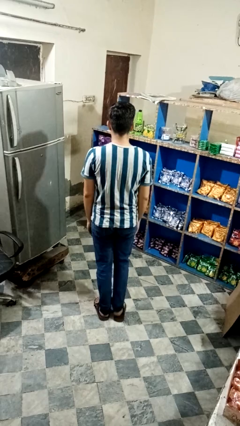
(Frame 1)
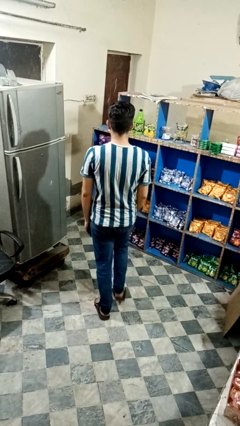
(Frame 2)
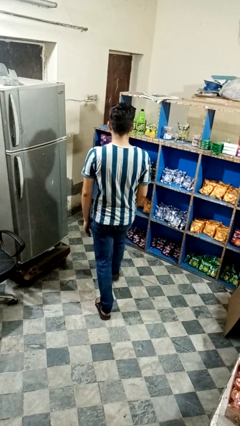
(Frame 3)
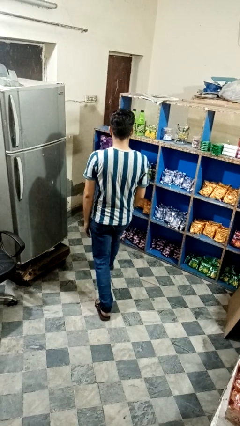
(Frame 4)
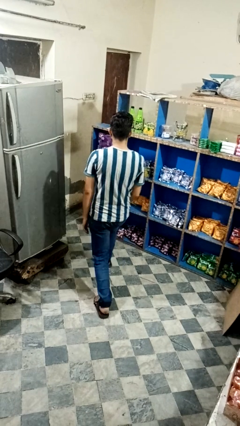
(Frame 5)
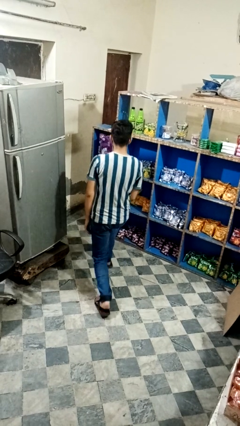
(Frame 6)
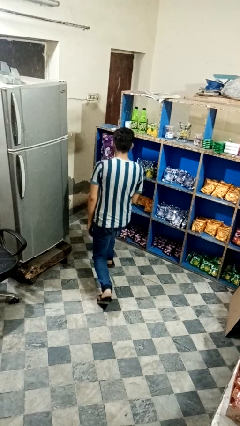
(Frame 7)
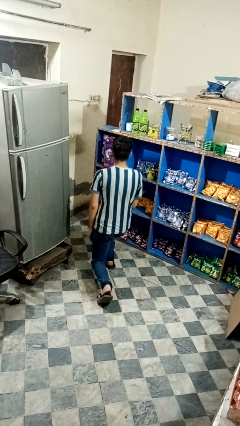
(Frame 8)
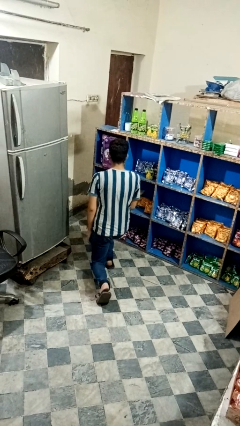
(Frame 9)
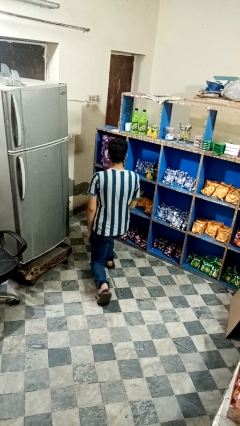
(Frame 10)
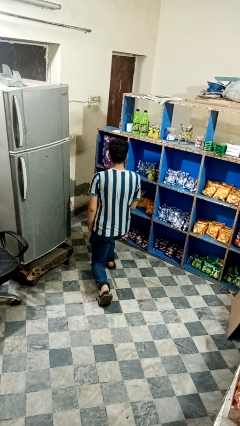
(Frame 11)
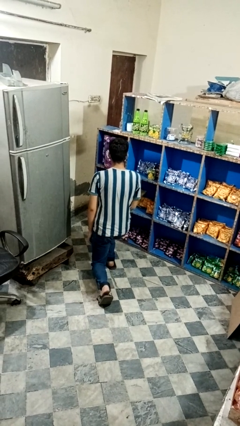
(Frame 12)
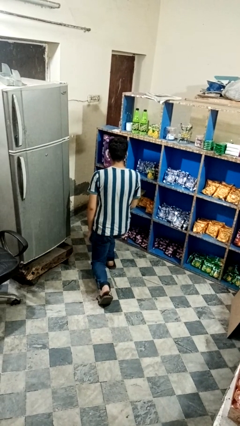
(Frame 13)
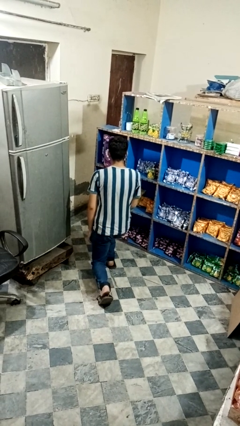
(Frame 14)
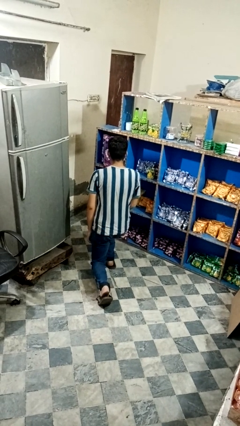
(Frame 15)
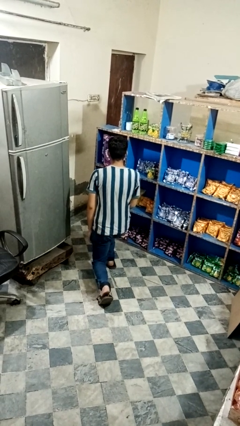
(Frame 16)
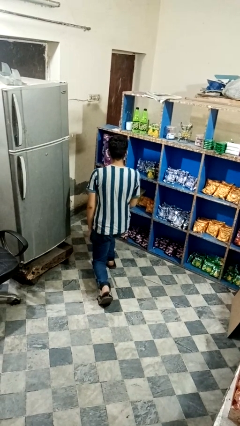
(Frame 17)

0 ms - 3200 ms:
person exercises with lunges

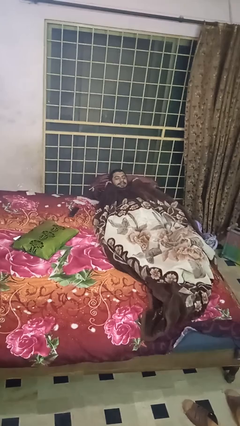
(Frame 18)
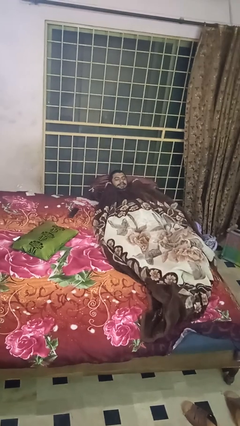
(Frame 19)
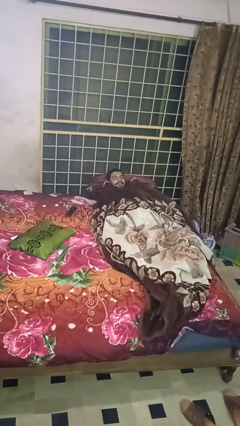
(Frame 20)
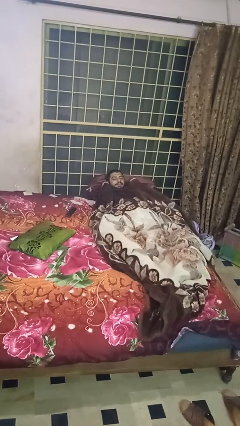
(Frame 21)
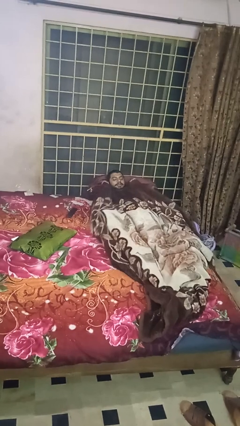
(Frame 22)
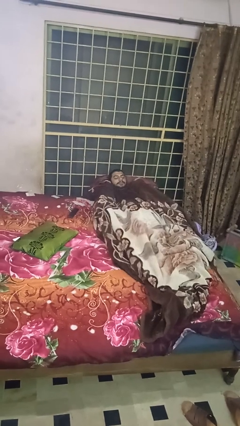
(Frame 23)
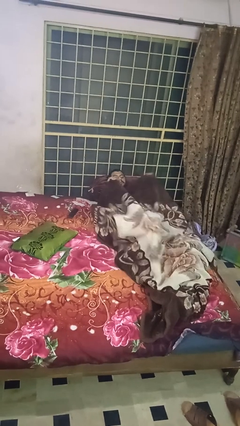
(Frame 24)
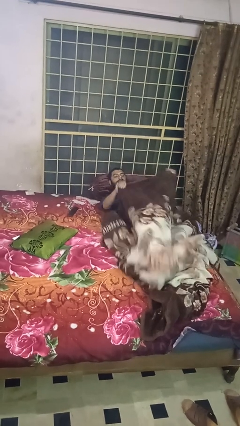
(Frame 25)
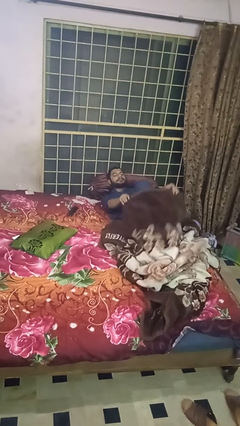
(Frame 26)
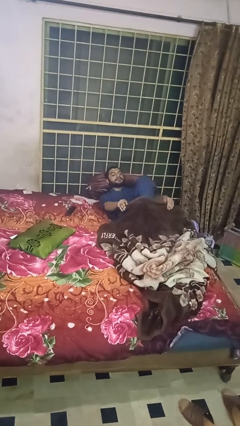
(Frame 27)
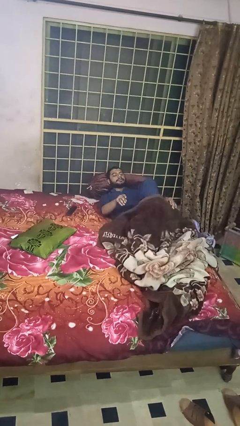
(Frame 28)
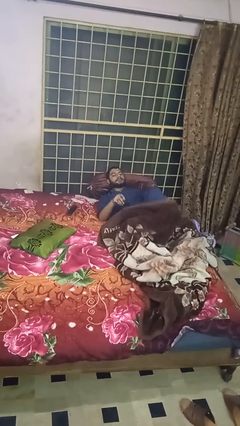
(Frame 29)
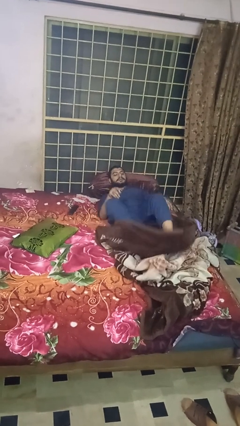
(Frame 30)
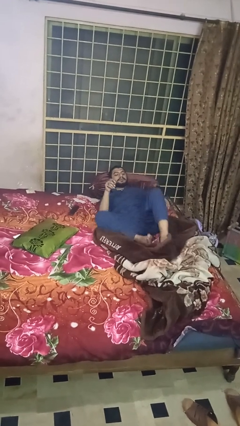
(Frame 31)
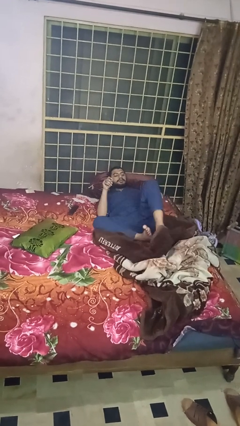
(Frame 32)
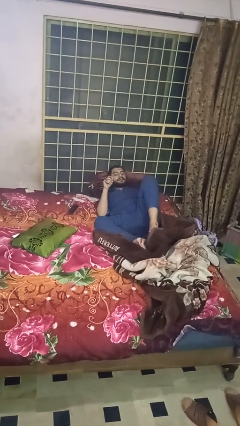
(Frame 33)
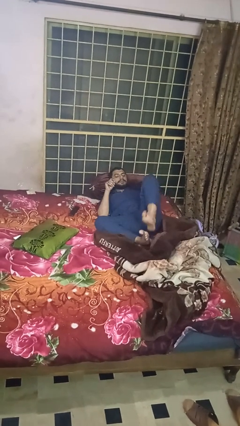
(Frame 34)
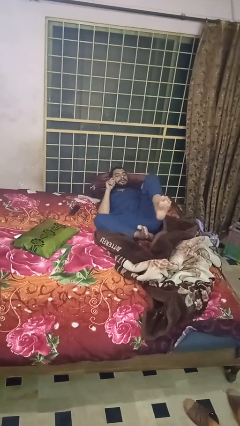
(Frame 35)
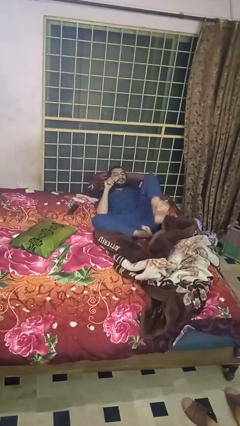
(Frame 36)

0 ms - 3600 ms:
person uncovers with blanket

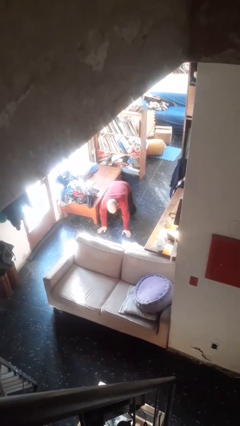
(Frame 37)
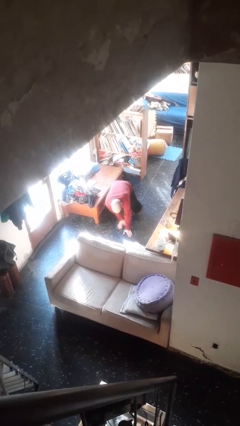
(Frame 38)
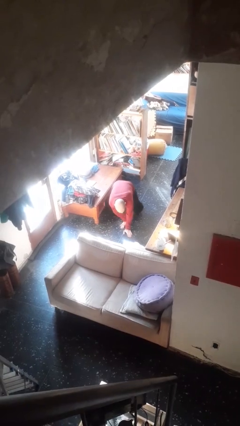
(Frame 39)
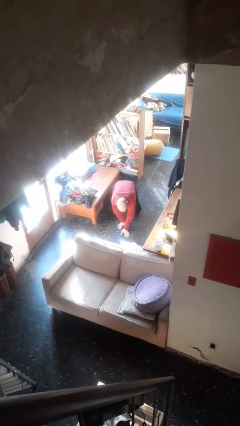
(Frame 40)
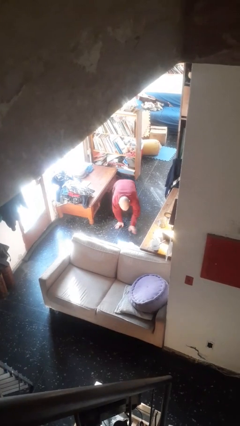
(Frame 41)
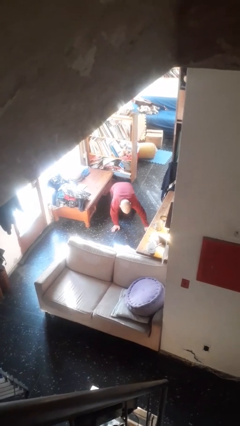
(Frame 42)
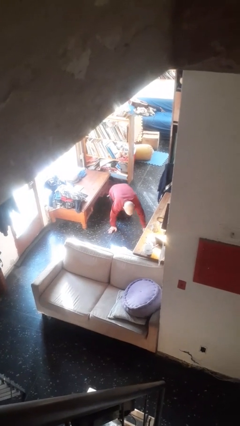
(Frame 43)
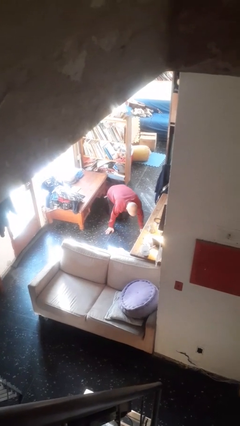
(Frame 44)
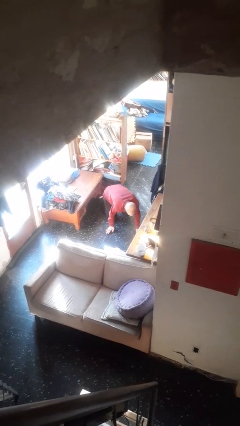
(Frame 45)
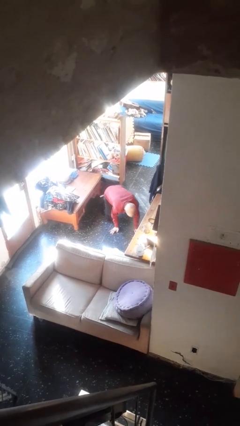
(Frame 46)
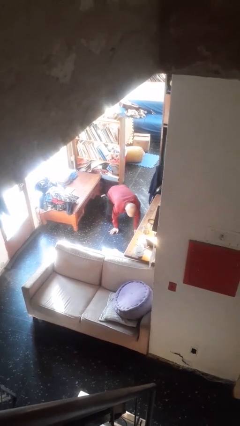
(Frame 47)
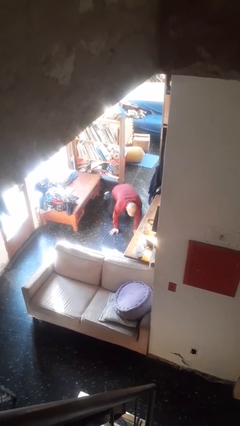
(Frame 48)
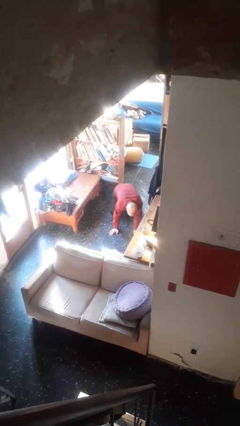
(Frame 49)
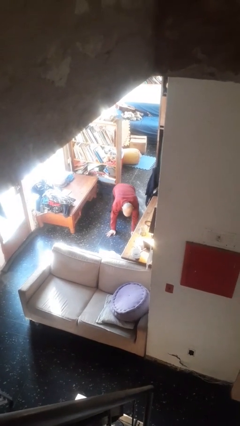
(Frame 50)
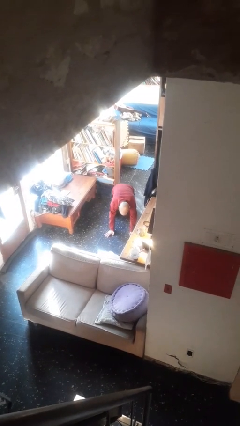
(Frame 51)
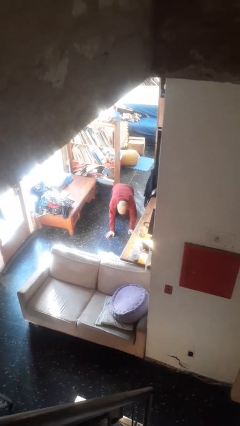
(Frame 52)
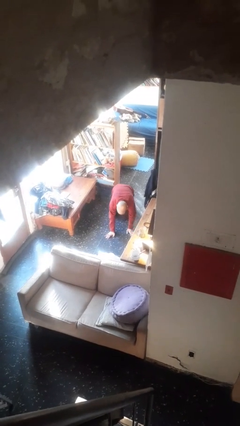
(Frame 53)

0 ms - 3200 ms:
person crawls

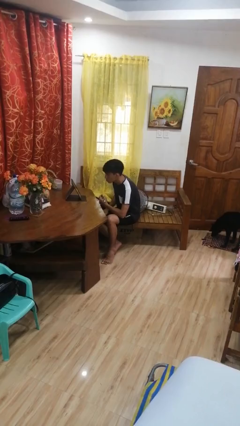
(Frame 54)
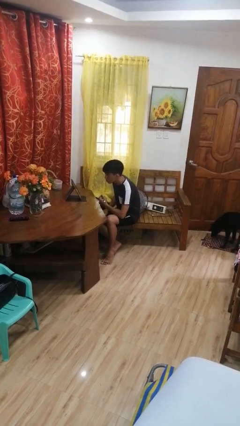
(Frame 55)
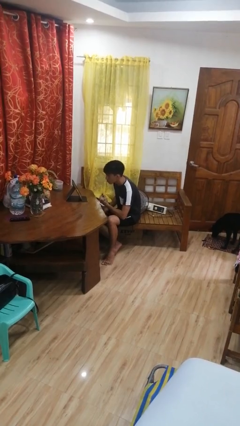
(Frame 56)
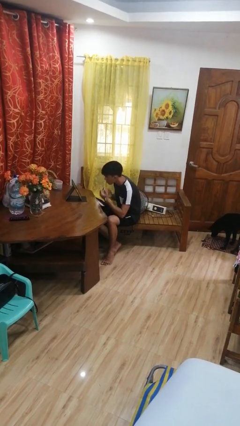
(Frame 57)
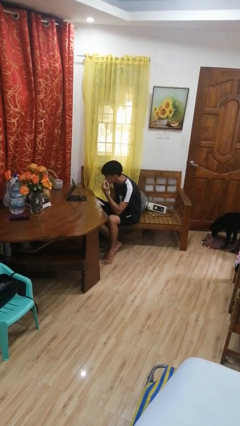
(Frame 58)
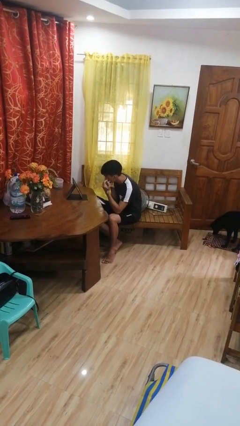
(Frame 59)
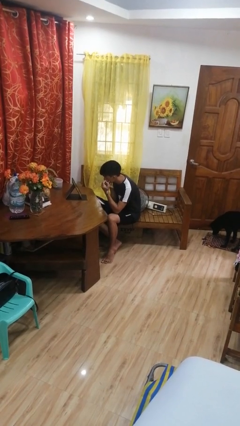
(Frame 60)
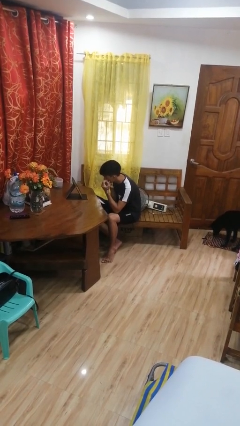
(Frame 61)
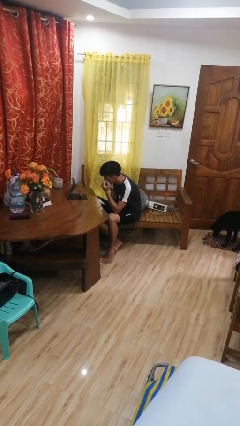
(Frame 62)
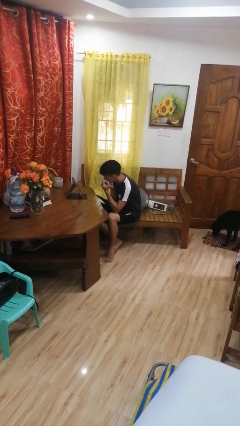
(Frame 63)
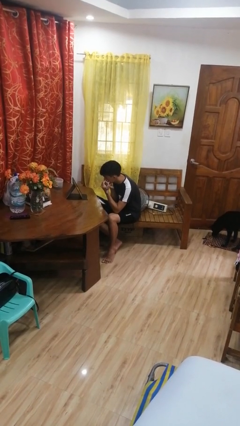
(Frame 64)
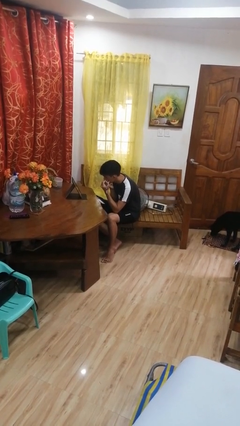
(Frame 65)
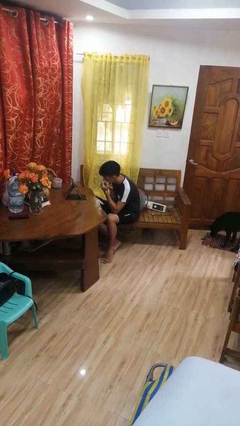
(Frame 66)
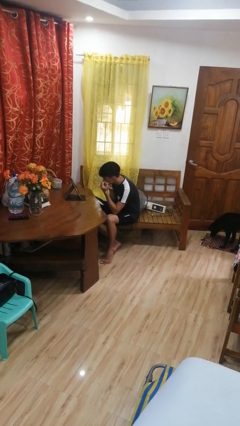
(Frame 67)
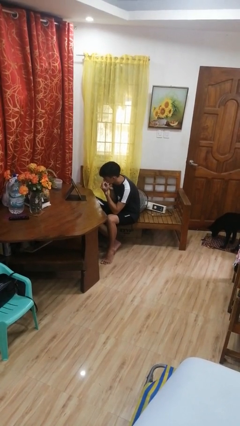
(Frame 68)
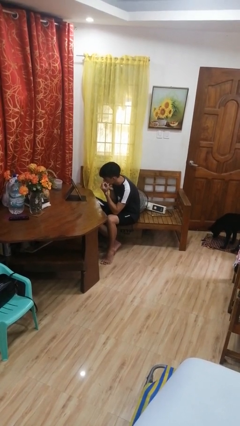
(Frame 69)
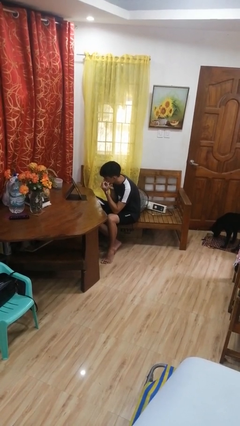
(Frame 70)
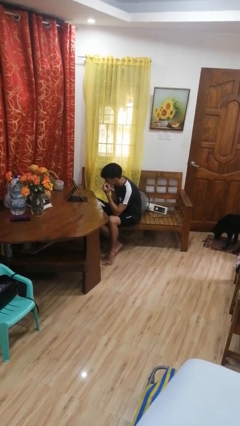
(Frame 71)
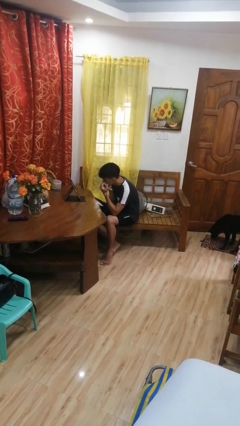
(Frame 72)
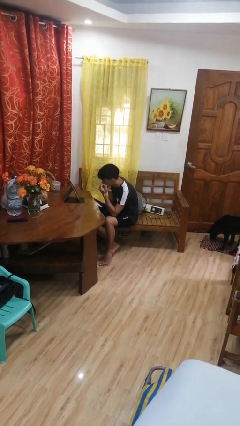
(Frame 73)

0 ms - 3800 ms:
person applies eye makeup

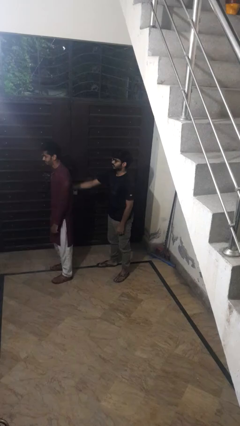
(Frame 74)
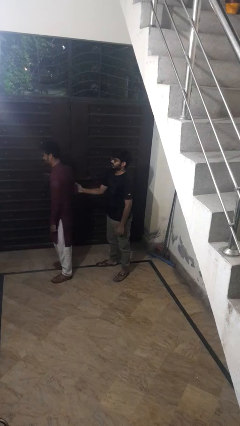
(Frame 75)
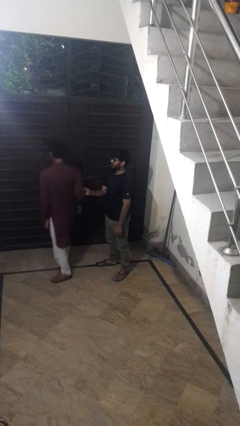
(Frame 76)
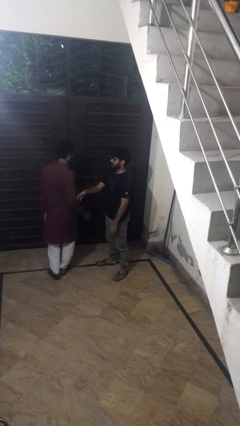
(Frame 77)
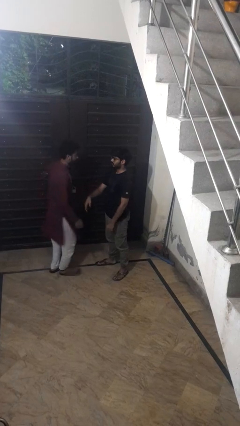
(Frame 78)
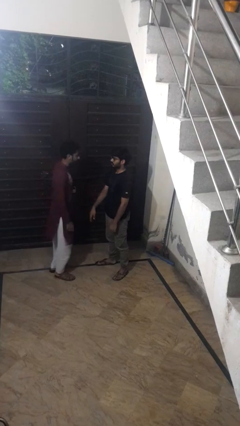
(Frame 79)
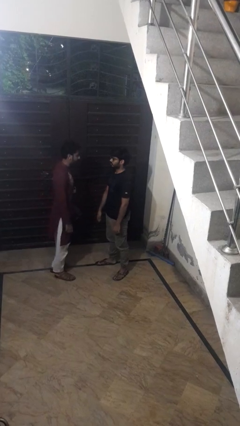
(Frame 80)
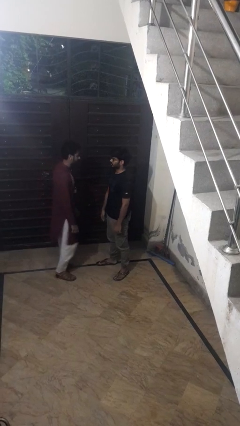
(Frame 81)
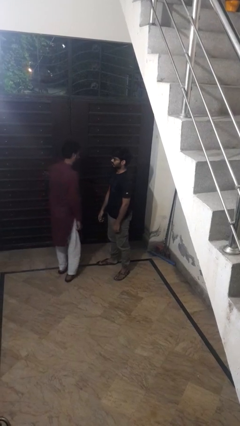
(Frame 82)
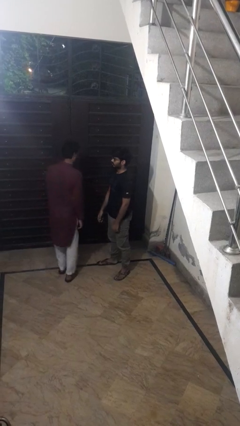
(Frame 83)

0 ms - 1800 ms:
person spins person around

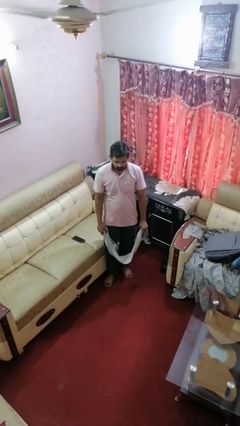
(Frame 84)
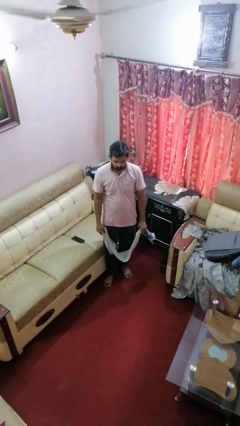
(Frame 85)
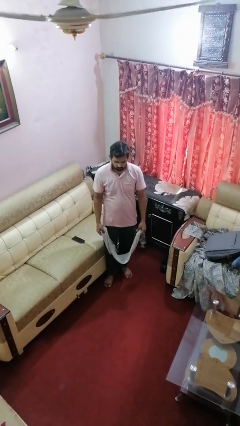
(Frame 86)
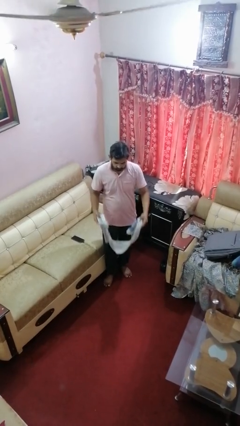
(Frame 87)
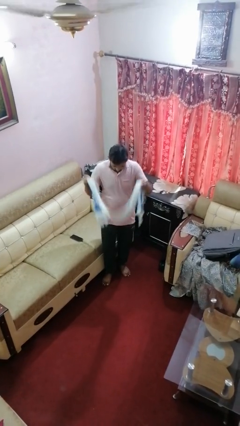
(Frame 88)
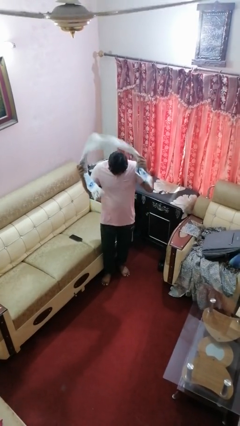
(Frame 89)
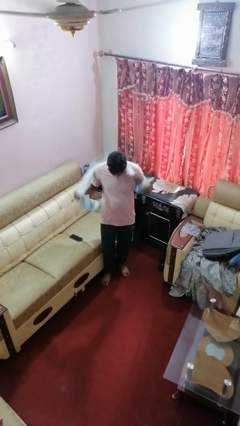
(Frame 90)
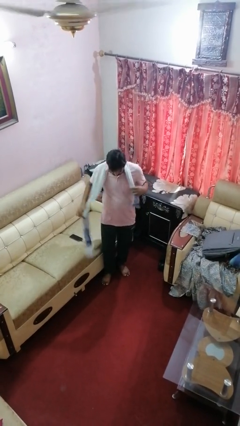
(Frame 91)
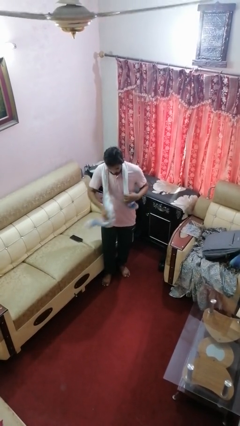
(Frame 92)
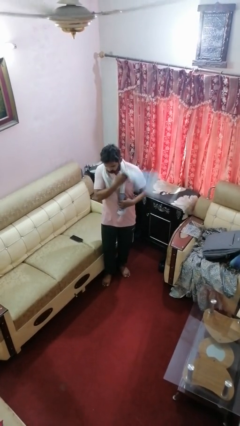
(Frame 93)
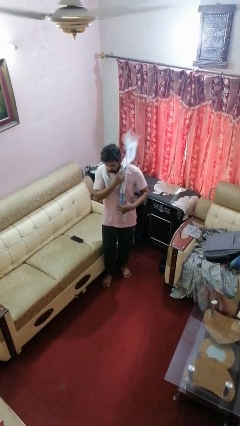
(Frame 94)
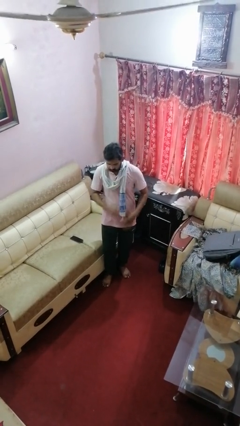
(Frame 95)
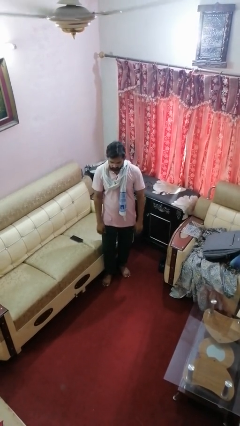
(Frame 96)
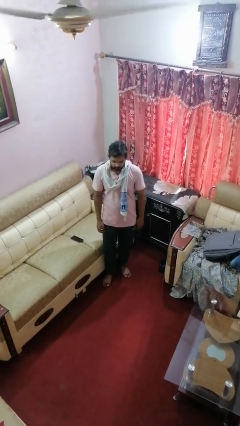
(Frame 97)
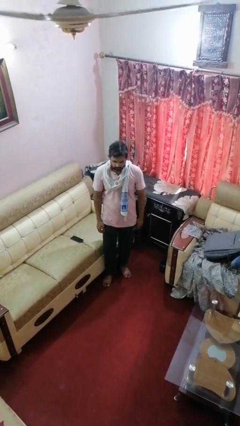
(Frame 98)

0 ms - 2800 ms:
person puts on scarf
